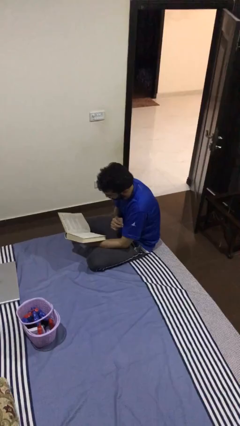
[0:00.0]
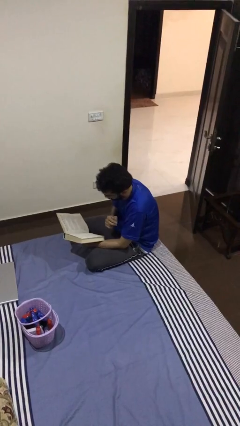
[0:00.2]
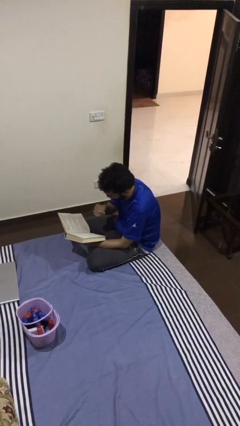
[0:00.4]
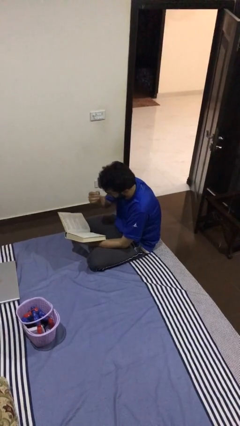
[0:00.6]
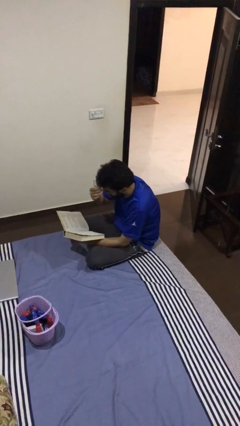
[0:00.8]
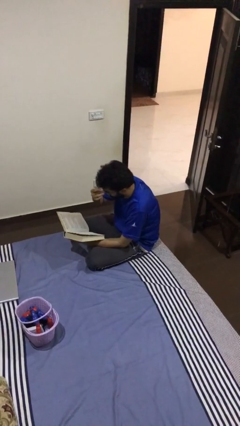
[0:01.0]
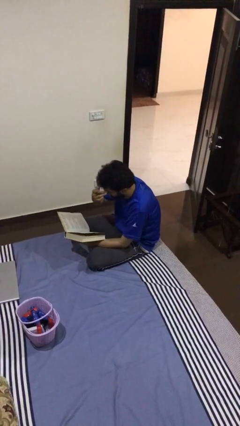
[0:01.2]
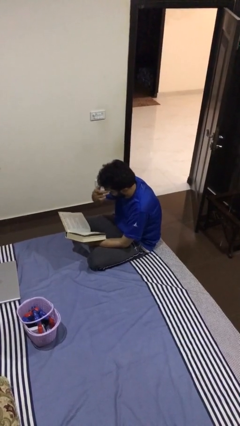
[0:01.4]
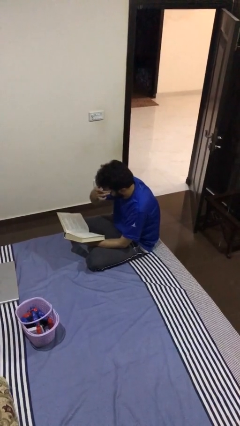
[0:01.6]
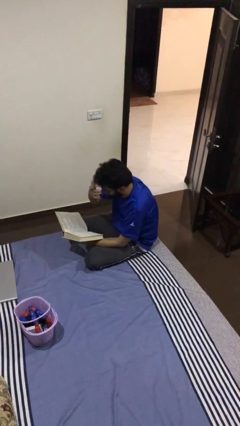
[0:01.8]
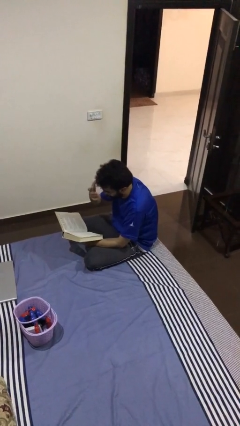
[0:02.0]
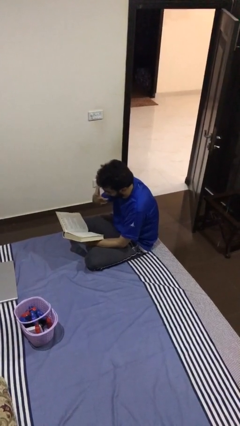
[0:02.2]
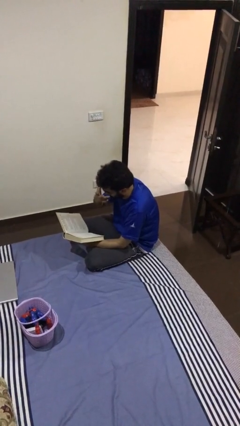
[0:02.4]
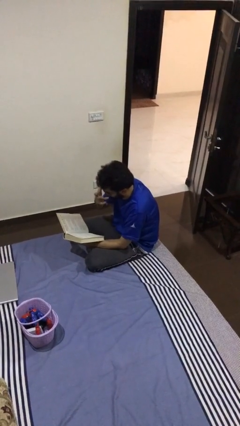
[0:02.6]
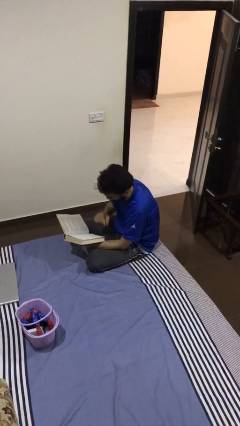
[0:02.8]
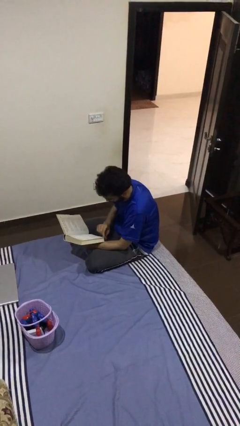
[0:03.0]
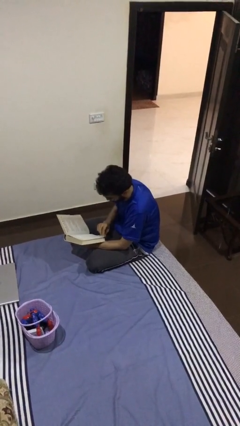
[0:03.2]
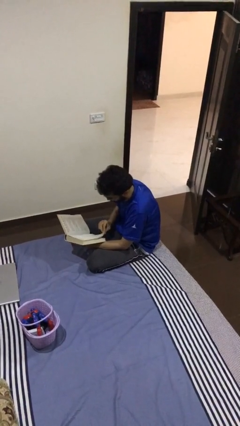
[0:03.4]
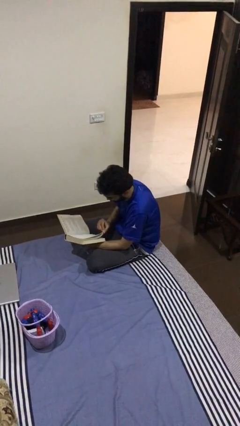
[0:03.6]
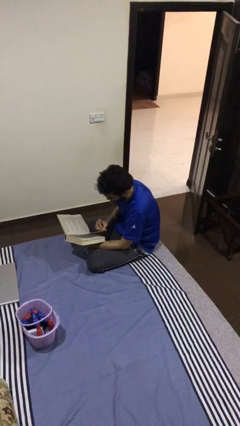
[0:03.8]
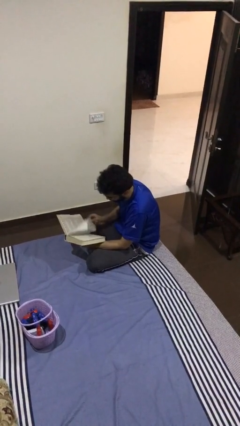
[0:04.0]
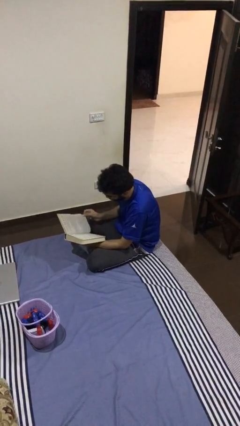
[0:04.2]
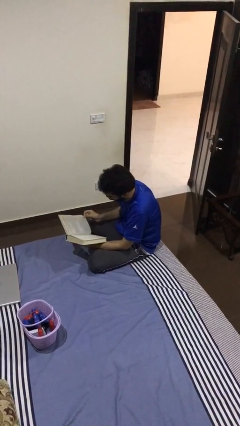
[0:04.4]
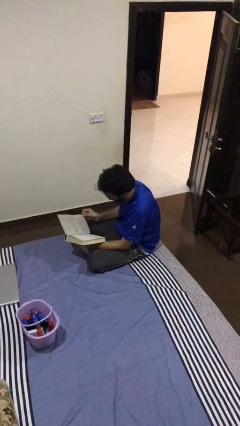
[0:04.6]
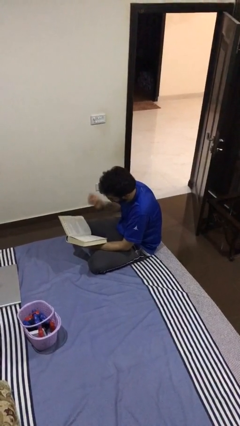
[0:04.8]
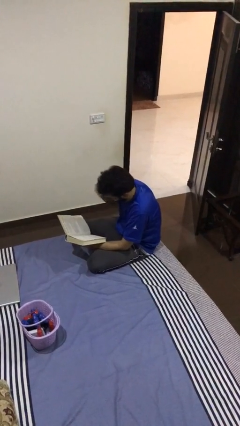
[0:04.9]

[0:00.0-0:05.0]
person reads document

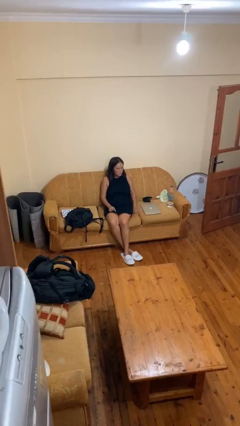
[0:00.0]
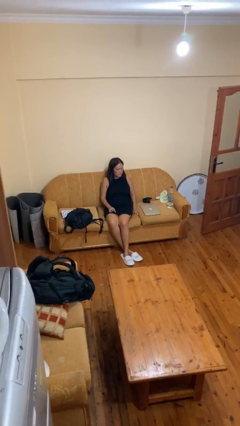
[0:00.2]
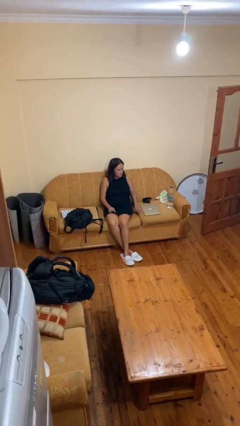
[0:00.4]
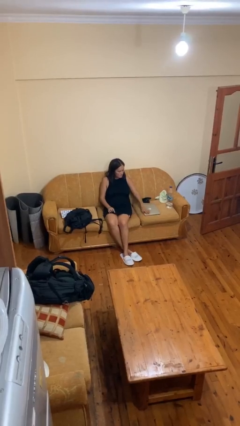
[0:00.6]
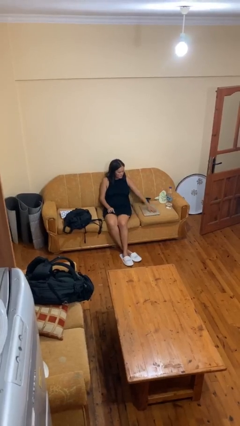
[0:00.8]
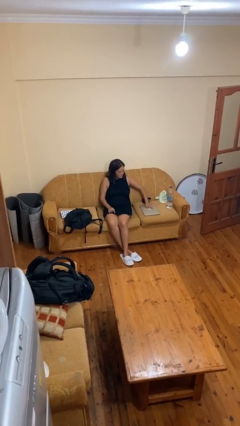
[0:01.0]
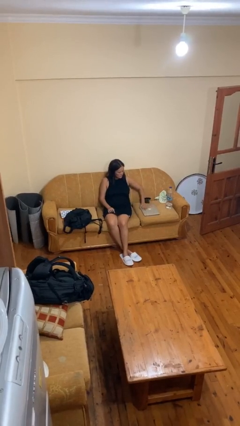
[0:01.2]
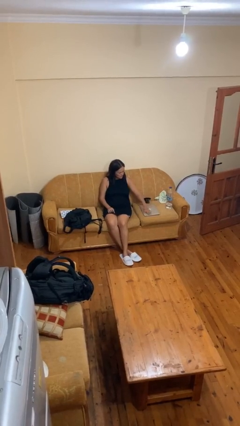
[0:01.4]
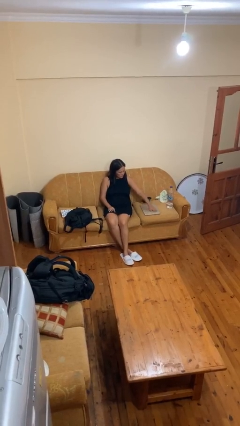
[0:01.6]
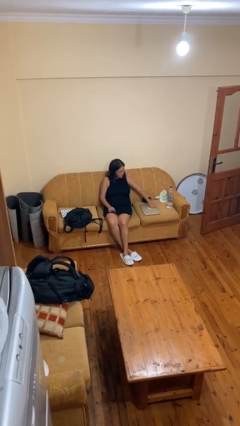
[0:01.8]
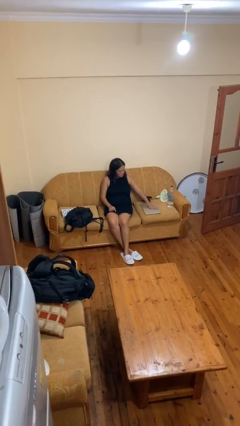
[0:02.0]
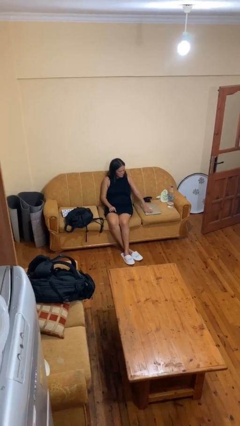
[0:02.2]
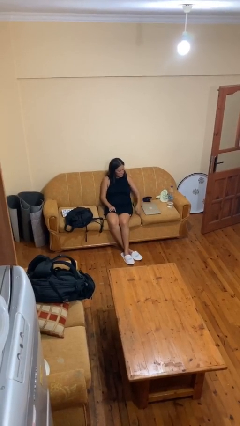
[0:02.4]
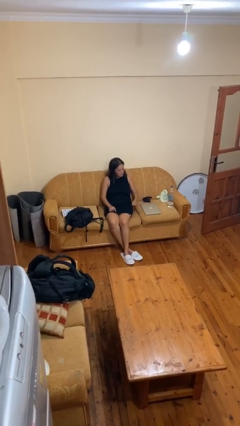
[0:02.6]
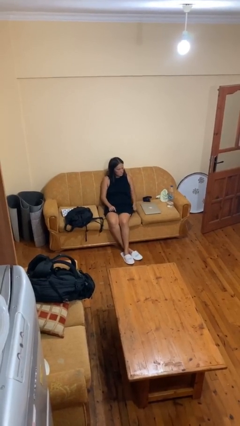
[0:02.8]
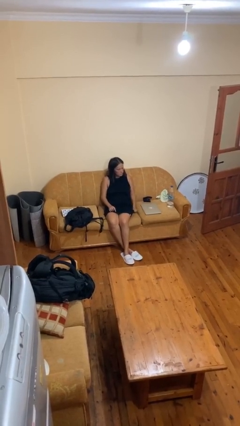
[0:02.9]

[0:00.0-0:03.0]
person waves hand over object

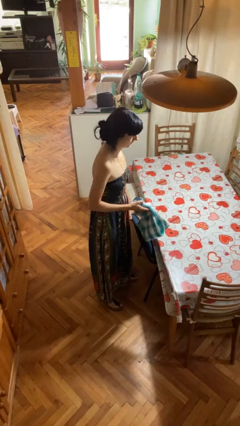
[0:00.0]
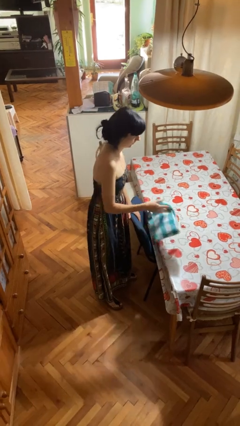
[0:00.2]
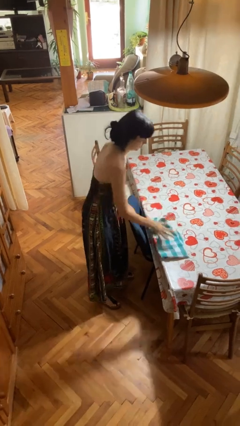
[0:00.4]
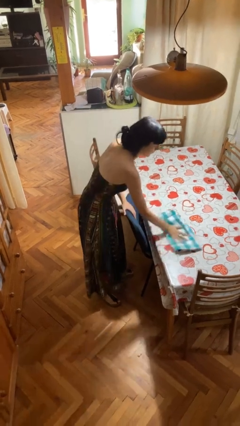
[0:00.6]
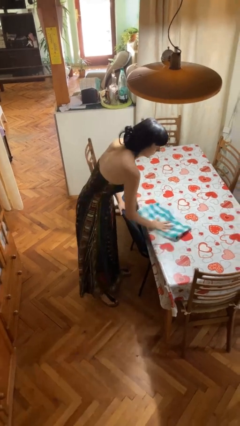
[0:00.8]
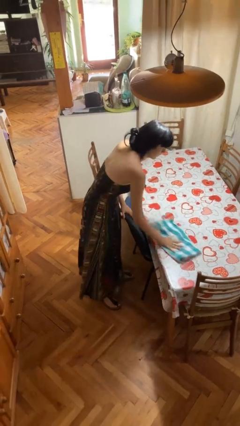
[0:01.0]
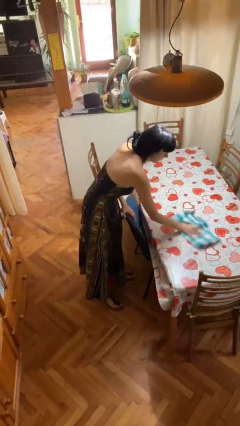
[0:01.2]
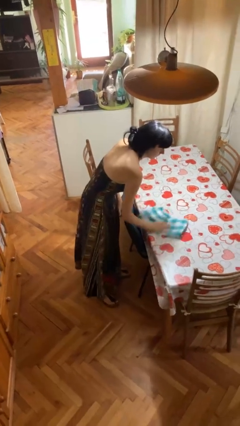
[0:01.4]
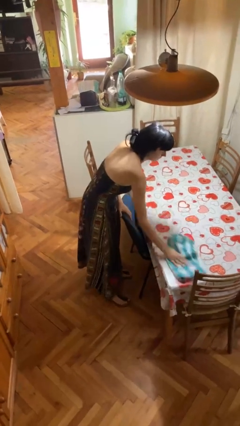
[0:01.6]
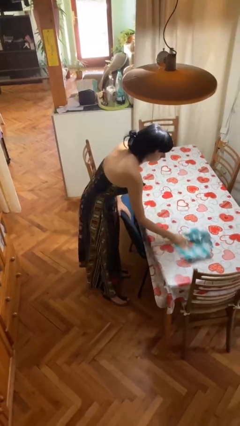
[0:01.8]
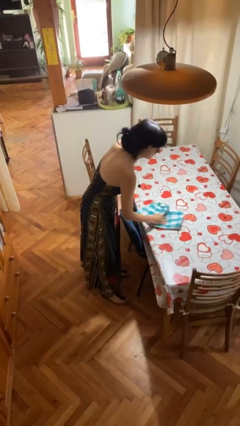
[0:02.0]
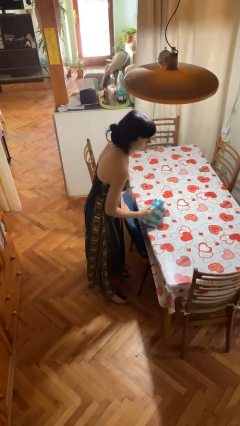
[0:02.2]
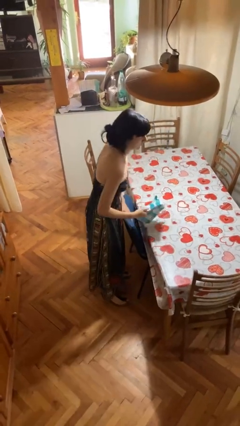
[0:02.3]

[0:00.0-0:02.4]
person cleans table with rag

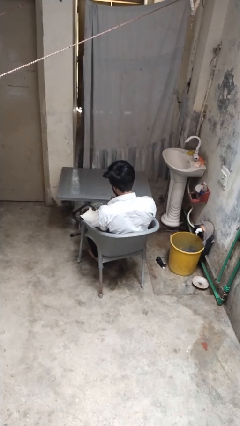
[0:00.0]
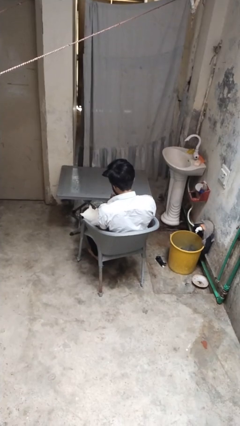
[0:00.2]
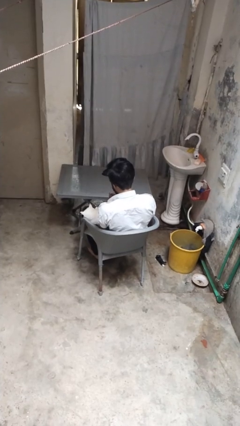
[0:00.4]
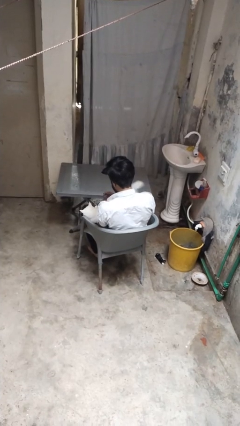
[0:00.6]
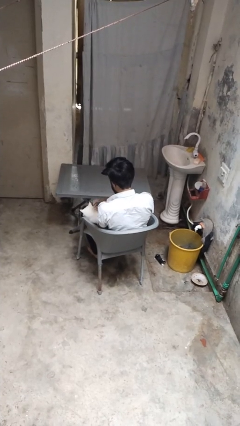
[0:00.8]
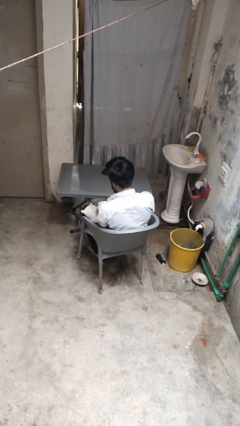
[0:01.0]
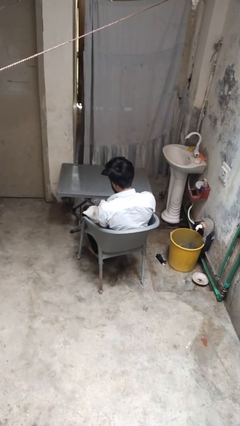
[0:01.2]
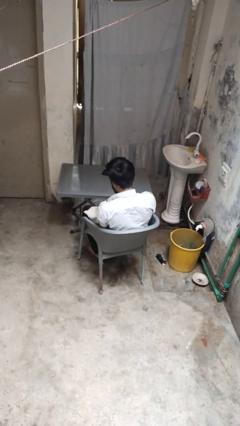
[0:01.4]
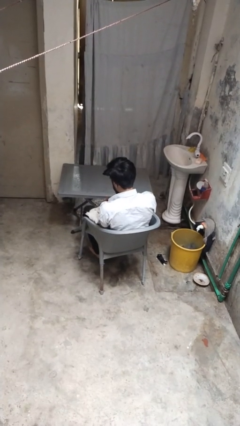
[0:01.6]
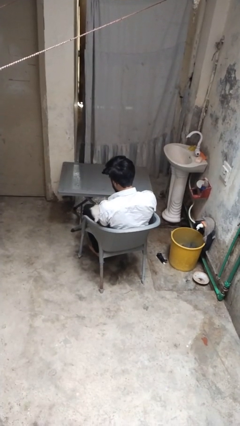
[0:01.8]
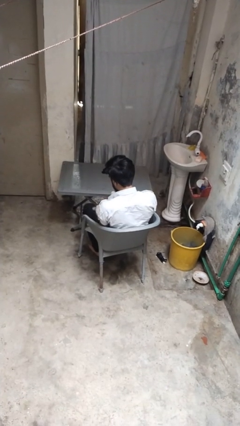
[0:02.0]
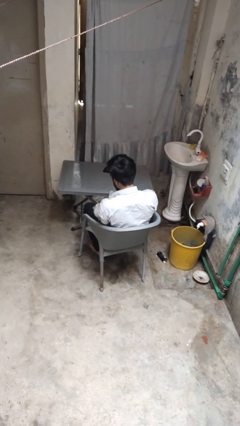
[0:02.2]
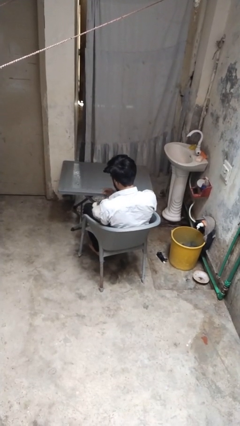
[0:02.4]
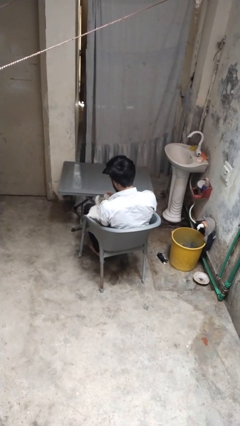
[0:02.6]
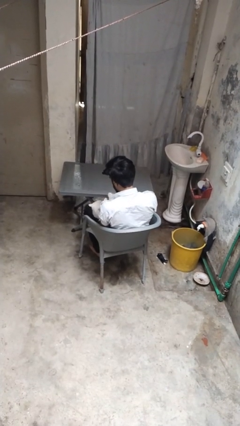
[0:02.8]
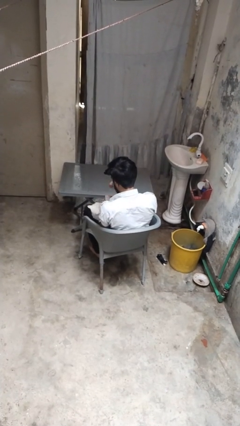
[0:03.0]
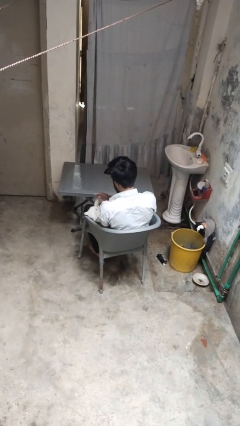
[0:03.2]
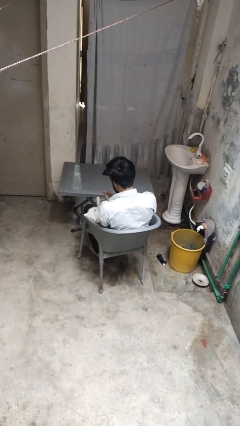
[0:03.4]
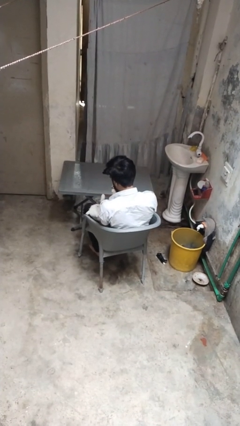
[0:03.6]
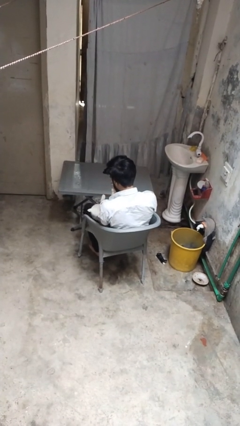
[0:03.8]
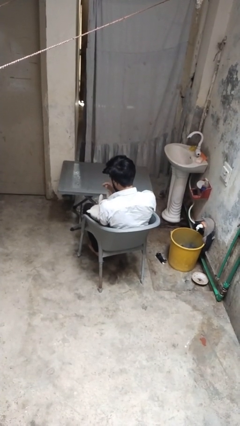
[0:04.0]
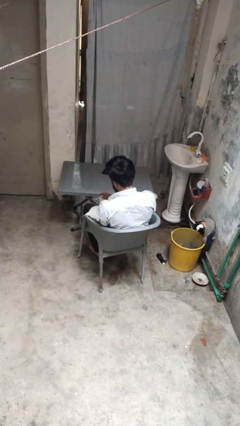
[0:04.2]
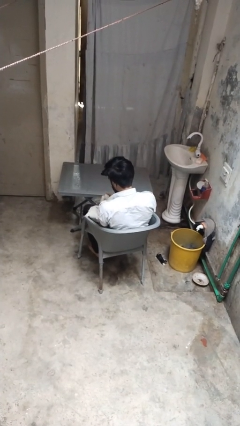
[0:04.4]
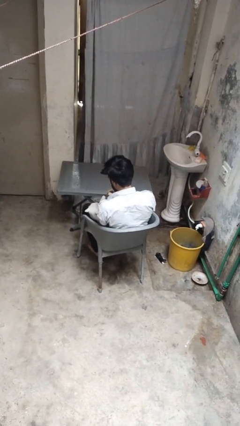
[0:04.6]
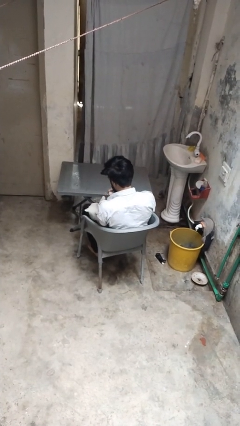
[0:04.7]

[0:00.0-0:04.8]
person pets cat

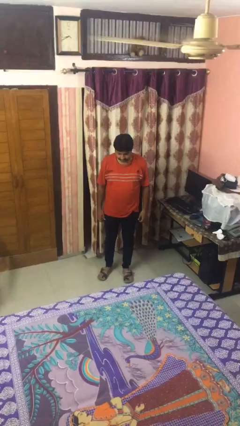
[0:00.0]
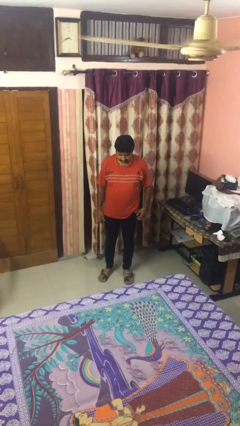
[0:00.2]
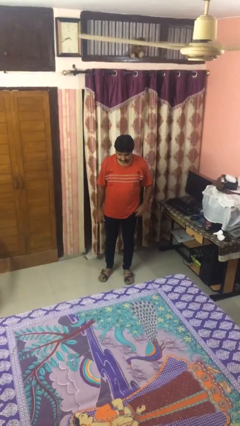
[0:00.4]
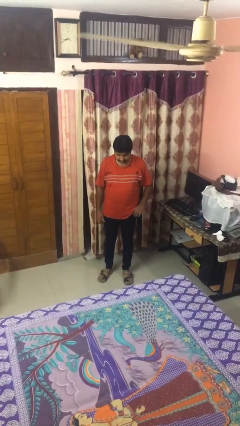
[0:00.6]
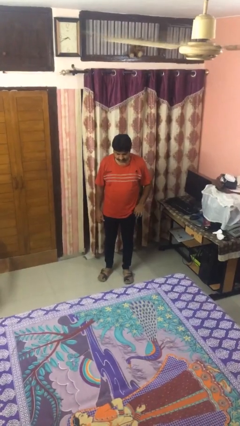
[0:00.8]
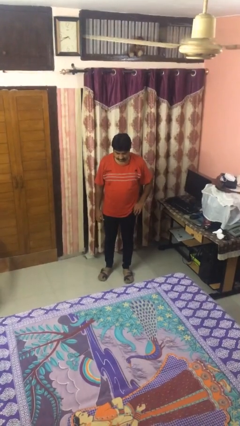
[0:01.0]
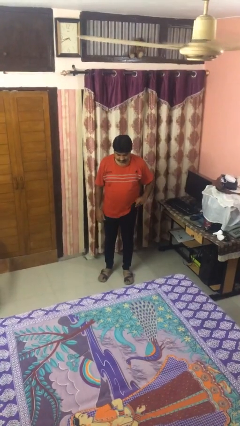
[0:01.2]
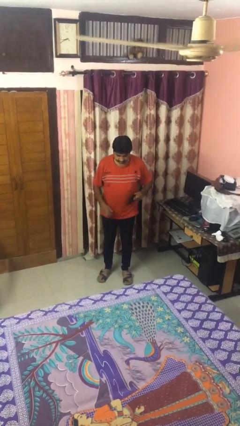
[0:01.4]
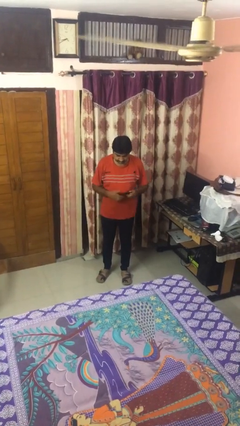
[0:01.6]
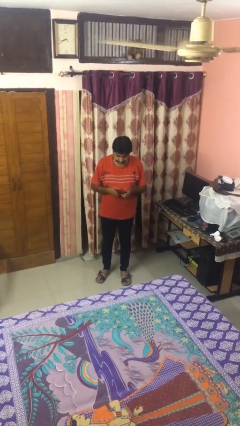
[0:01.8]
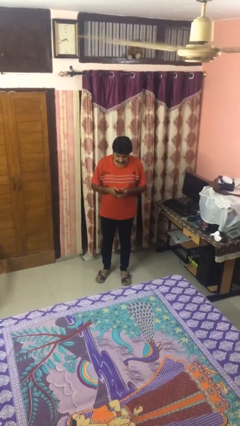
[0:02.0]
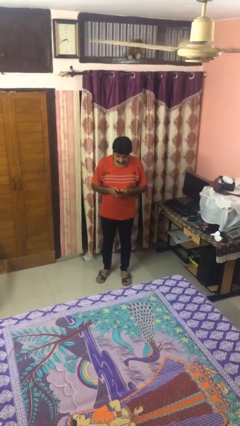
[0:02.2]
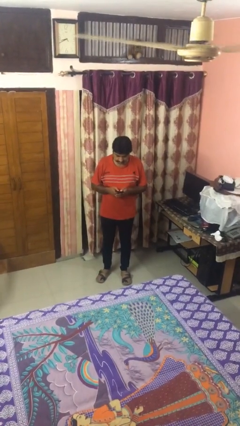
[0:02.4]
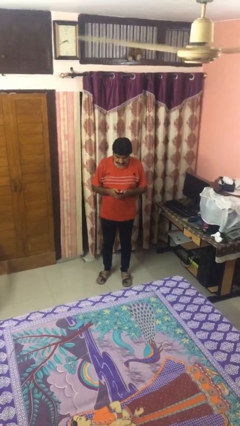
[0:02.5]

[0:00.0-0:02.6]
person takes phone from pocket
